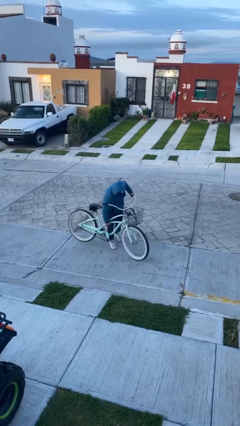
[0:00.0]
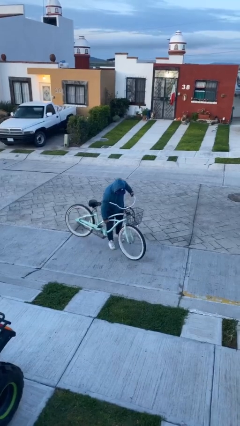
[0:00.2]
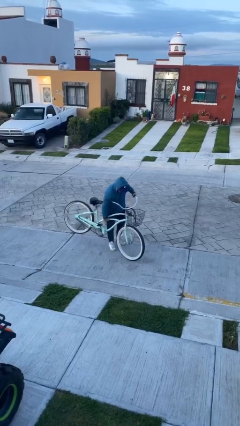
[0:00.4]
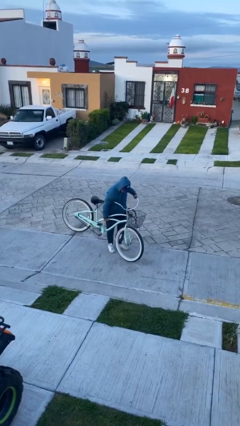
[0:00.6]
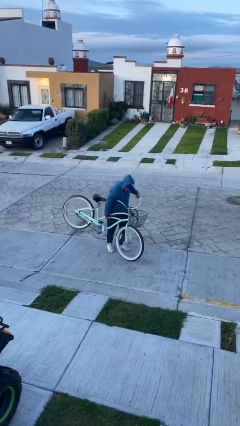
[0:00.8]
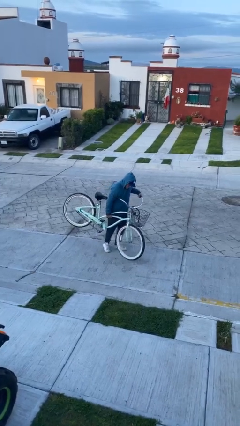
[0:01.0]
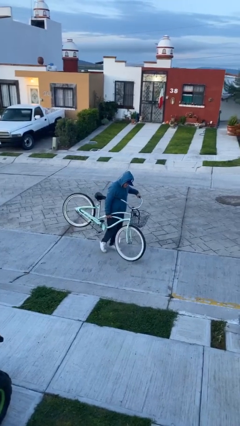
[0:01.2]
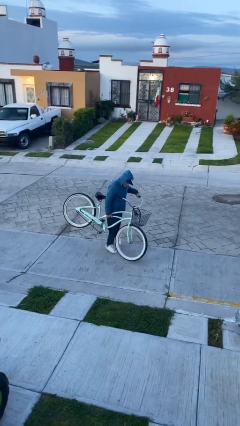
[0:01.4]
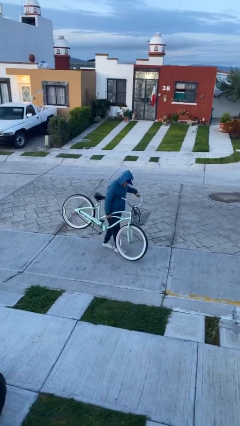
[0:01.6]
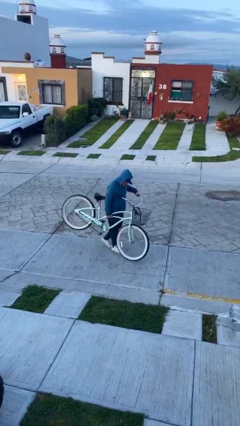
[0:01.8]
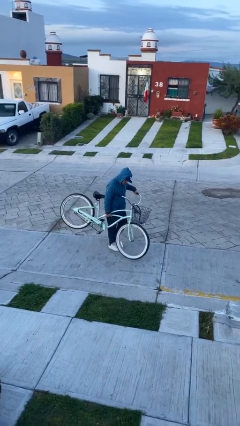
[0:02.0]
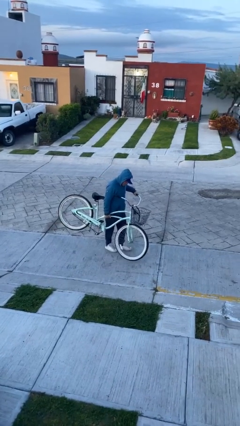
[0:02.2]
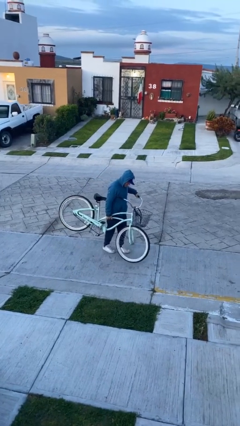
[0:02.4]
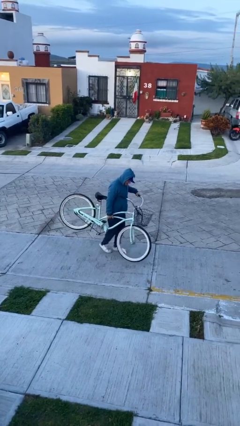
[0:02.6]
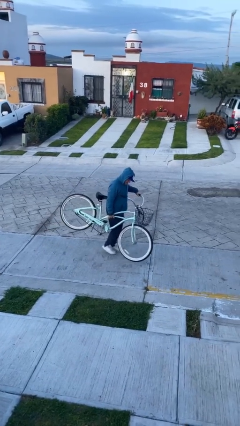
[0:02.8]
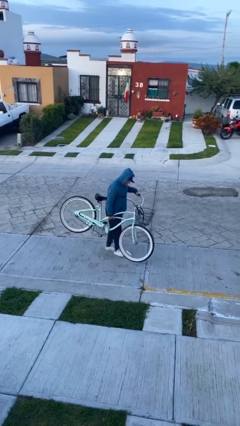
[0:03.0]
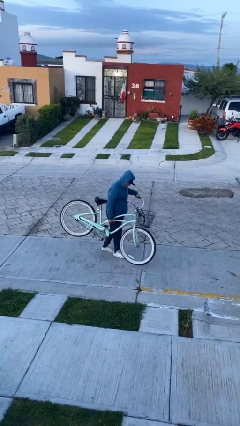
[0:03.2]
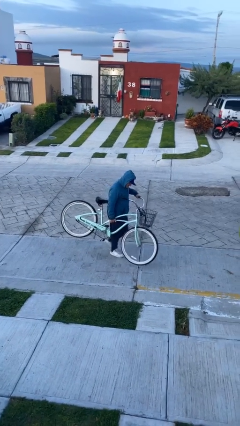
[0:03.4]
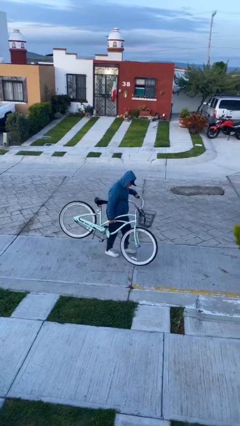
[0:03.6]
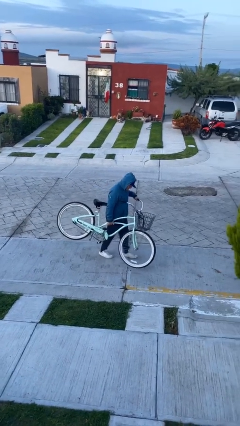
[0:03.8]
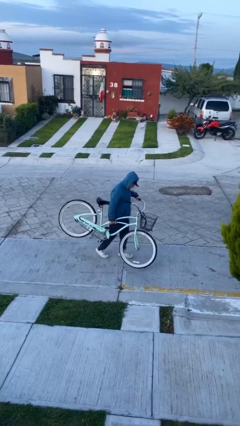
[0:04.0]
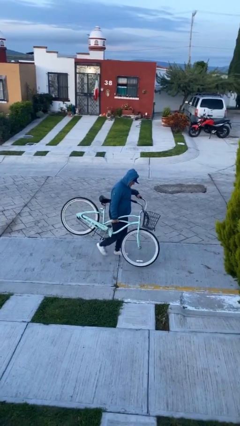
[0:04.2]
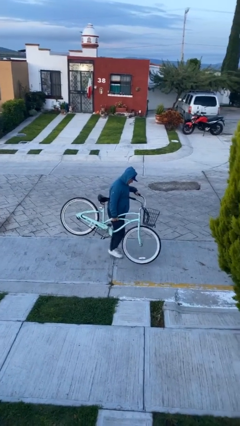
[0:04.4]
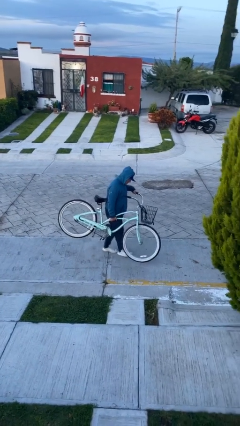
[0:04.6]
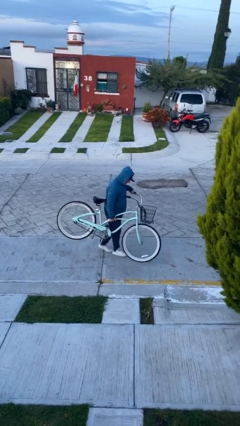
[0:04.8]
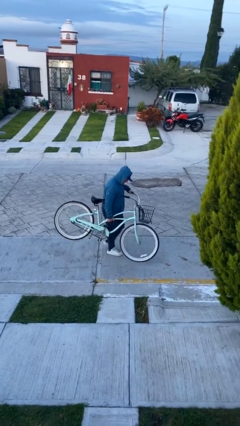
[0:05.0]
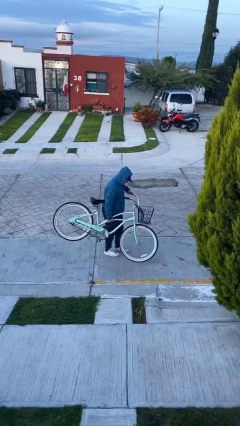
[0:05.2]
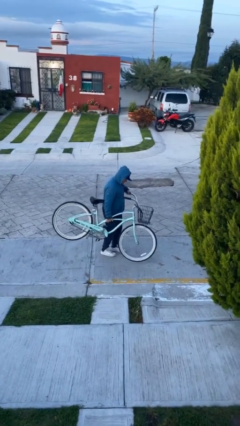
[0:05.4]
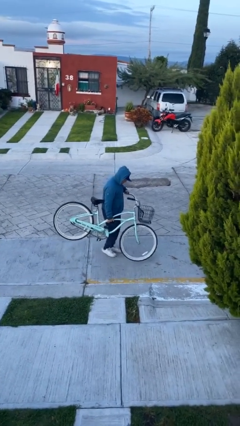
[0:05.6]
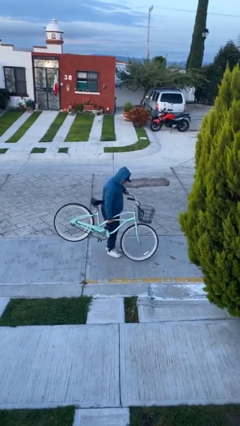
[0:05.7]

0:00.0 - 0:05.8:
person carries heavy object

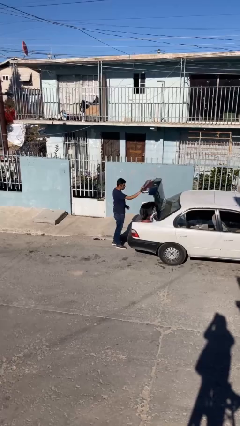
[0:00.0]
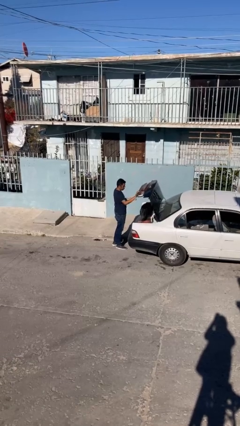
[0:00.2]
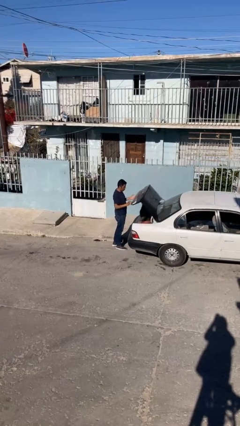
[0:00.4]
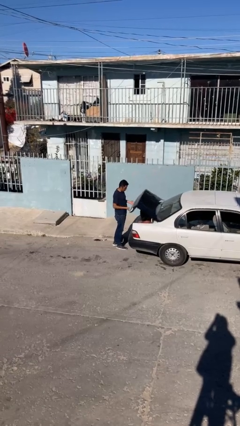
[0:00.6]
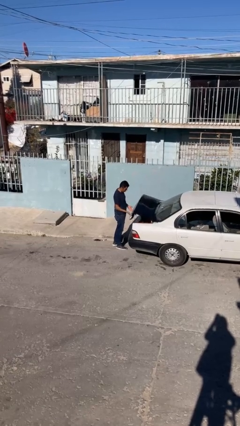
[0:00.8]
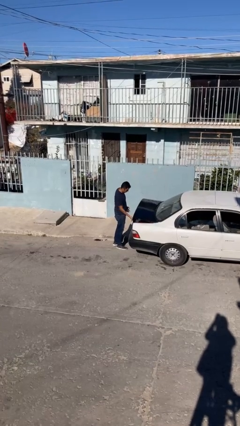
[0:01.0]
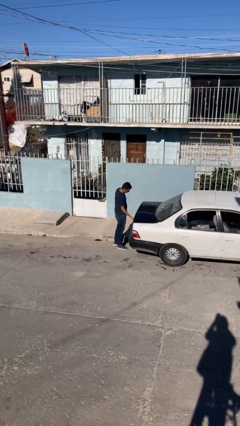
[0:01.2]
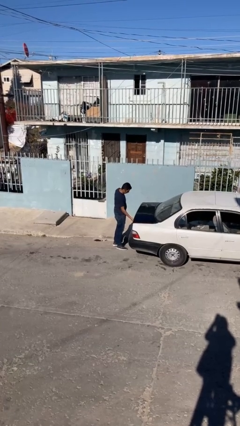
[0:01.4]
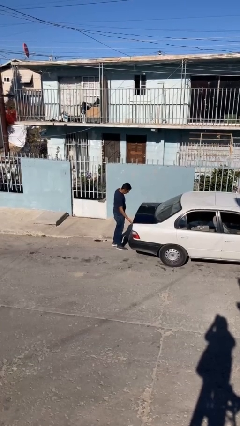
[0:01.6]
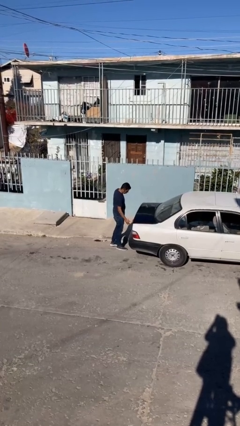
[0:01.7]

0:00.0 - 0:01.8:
person closes car trunk

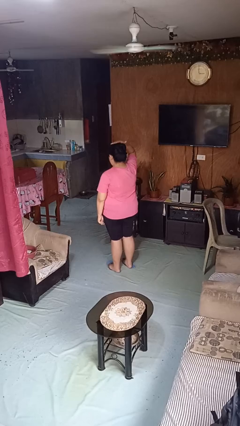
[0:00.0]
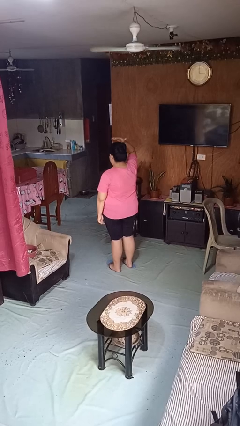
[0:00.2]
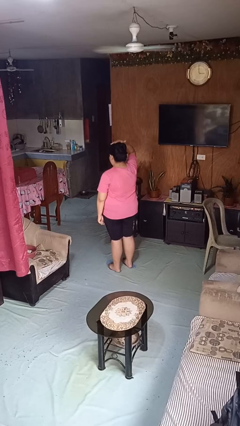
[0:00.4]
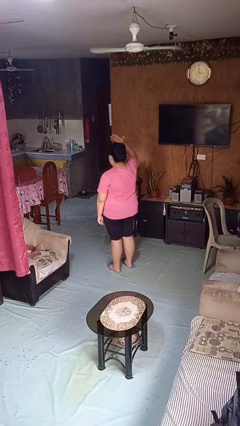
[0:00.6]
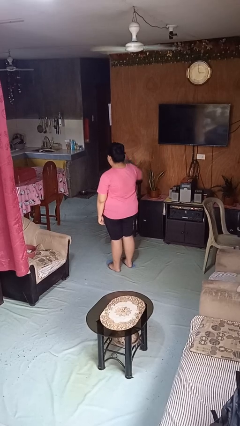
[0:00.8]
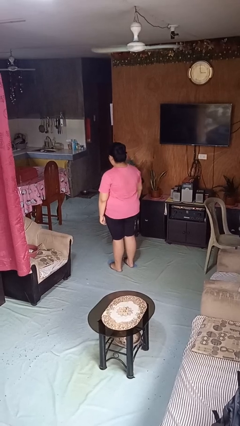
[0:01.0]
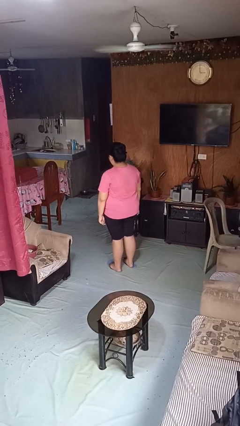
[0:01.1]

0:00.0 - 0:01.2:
person pats head

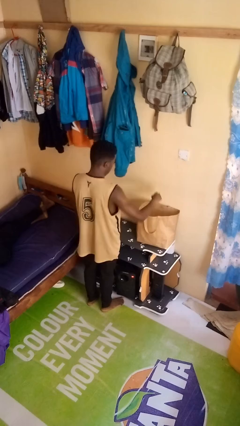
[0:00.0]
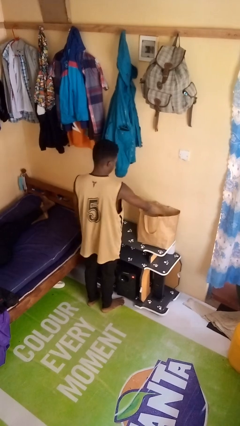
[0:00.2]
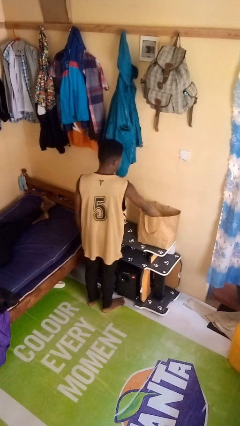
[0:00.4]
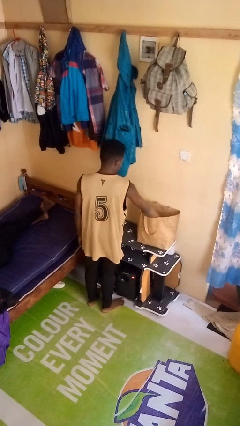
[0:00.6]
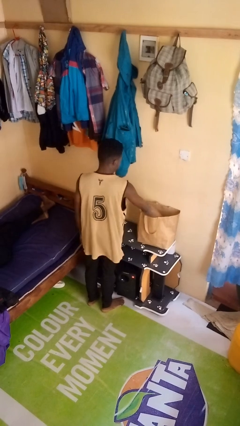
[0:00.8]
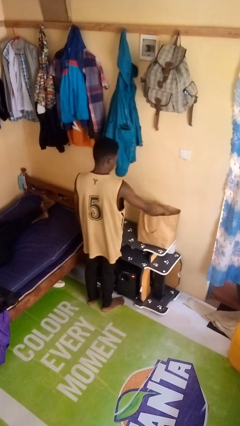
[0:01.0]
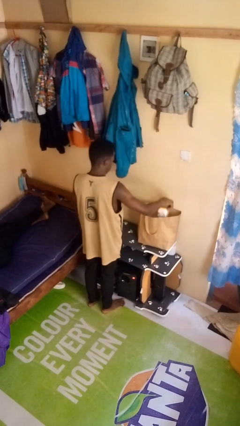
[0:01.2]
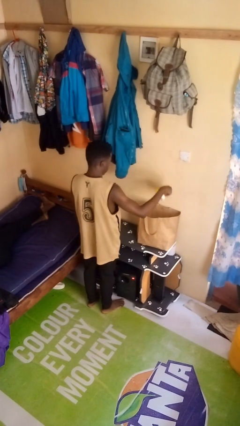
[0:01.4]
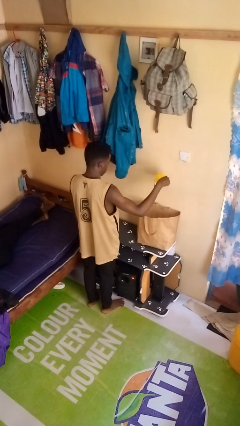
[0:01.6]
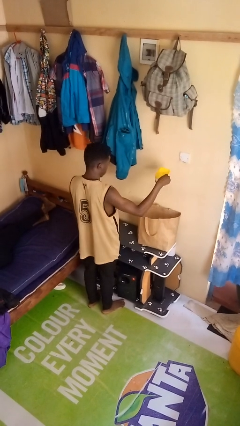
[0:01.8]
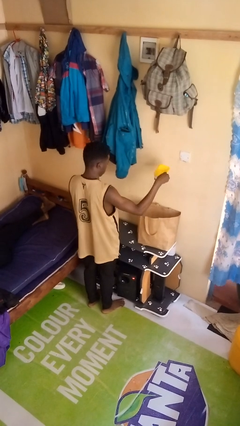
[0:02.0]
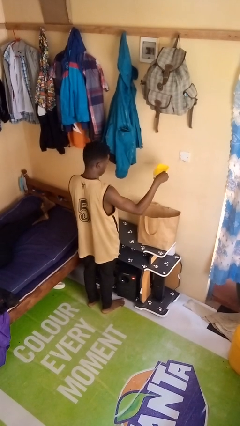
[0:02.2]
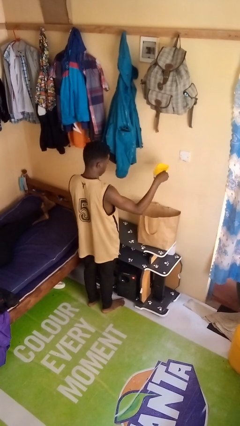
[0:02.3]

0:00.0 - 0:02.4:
person takes object from bag

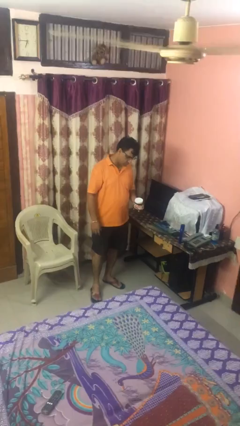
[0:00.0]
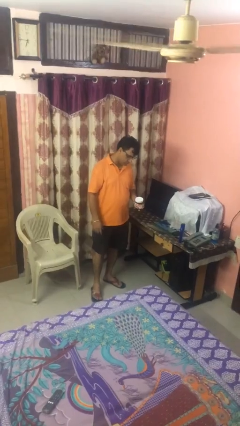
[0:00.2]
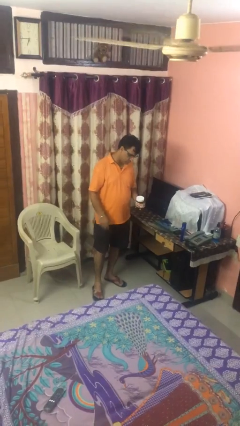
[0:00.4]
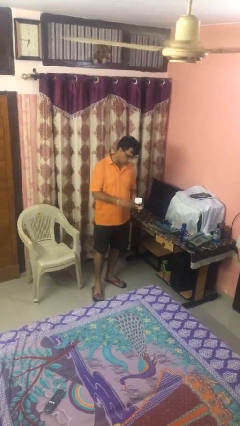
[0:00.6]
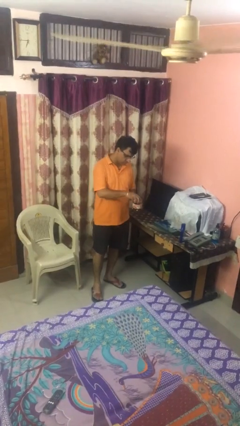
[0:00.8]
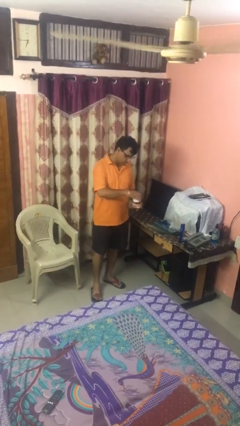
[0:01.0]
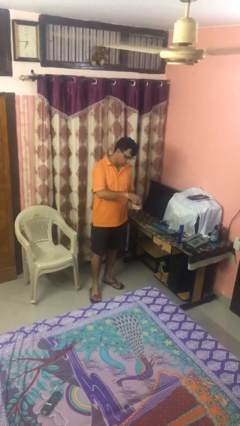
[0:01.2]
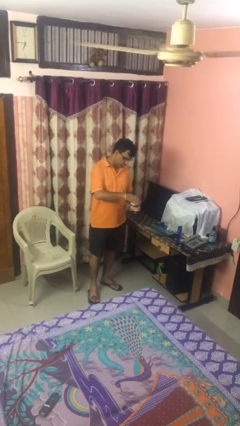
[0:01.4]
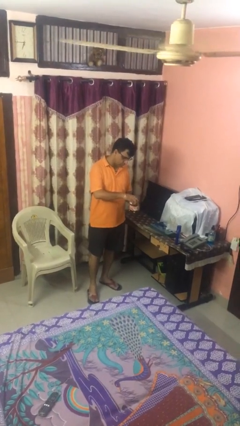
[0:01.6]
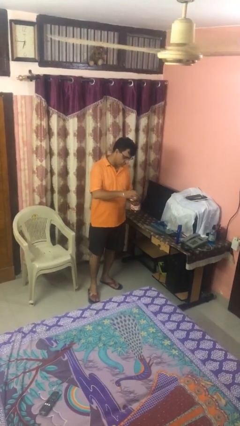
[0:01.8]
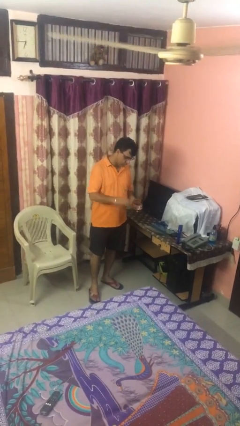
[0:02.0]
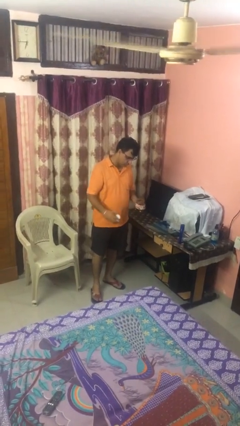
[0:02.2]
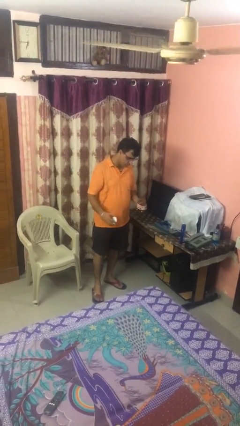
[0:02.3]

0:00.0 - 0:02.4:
person opens jar

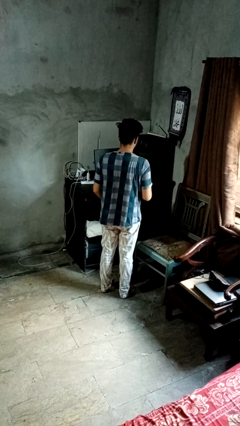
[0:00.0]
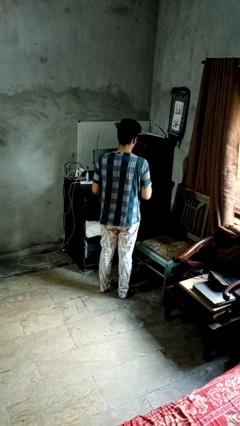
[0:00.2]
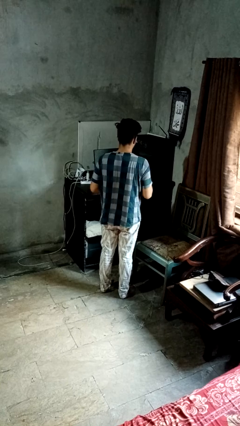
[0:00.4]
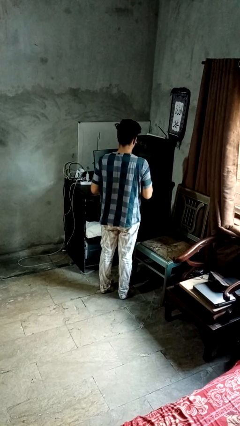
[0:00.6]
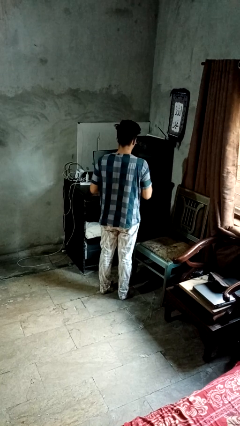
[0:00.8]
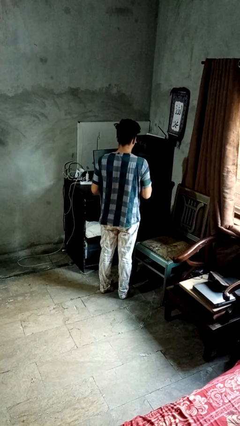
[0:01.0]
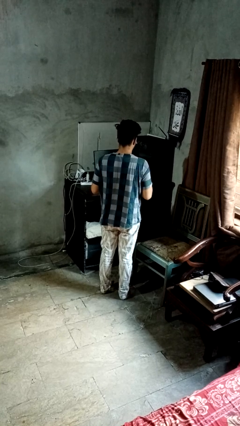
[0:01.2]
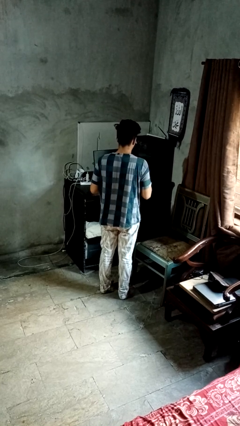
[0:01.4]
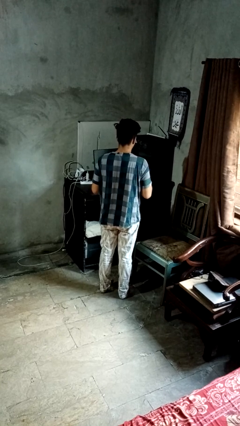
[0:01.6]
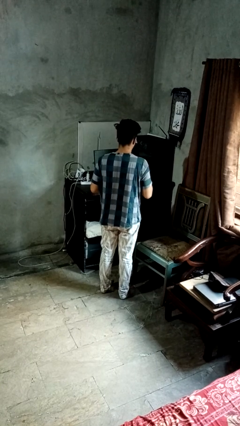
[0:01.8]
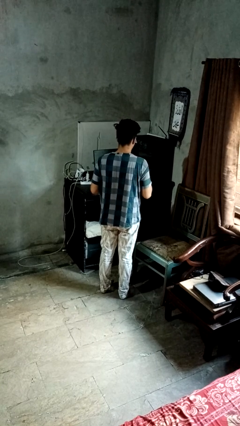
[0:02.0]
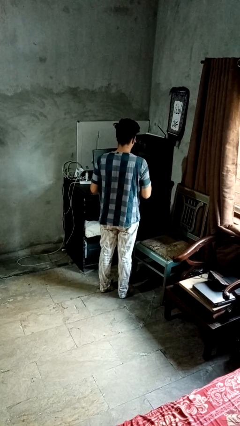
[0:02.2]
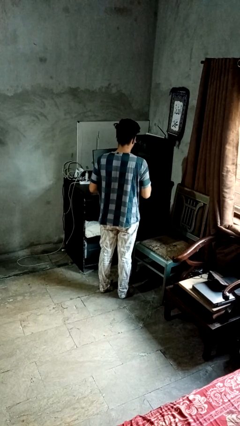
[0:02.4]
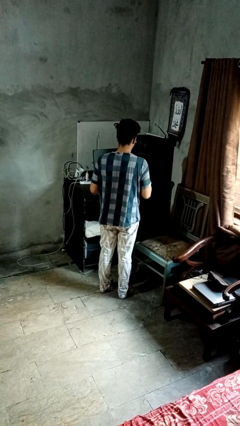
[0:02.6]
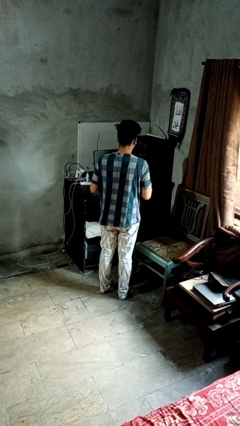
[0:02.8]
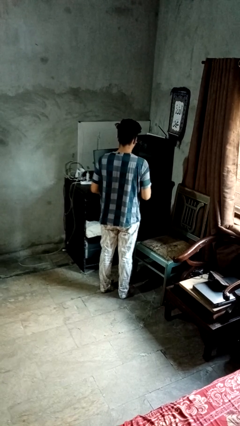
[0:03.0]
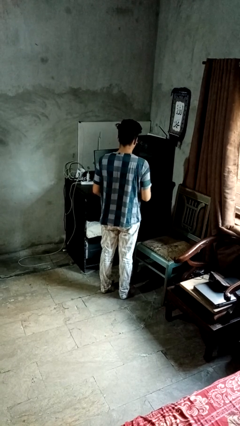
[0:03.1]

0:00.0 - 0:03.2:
person drums on chest

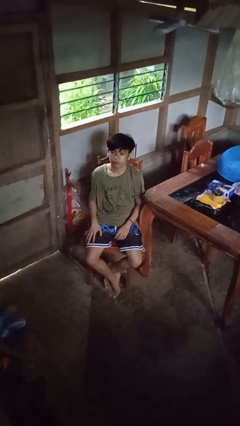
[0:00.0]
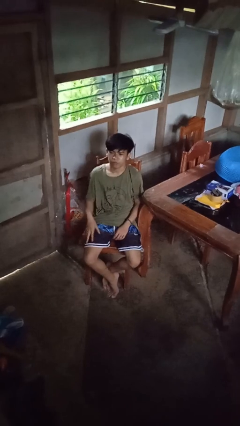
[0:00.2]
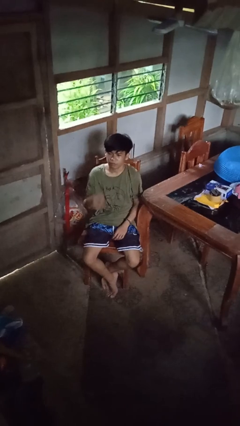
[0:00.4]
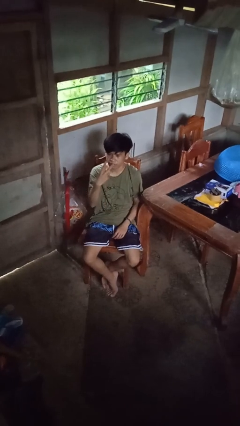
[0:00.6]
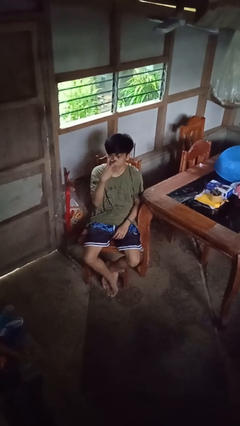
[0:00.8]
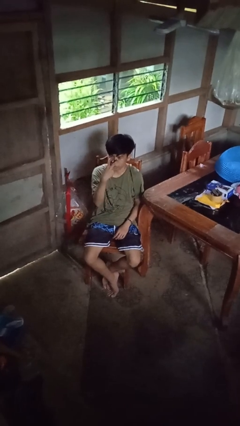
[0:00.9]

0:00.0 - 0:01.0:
person gestures watch closely
